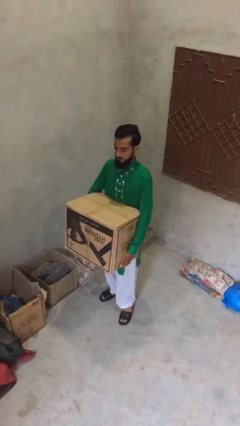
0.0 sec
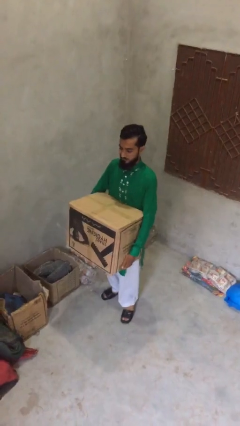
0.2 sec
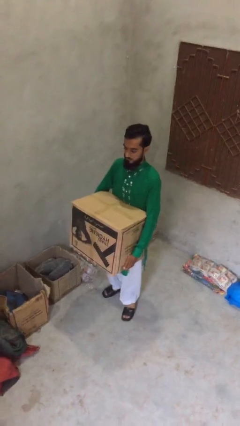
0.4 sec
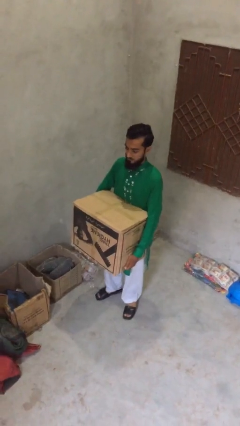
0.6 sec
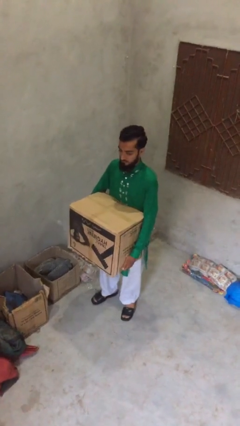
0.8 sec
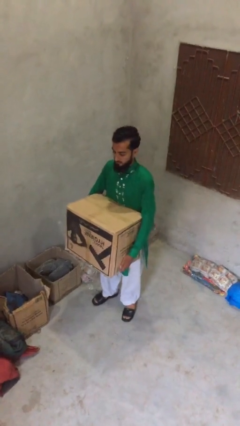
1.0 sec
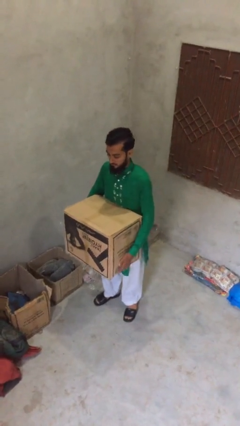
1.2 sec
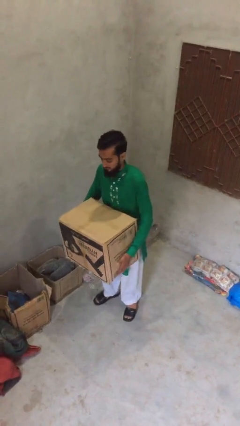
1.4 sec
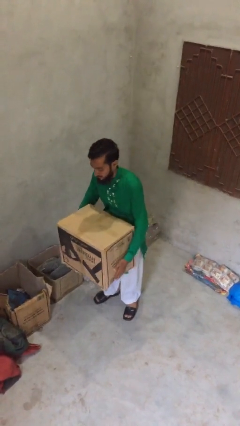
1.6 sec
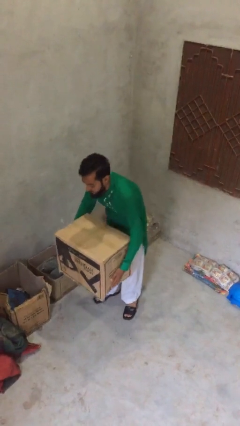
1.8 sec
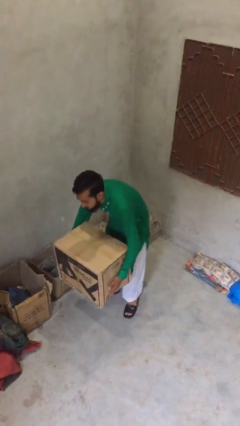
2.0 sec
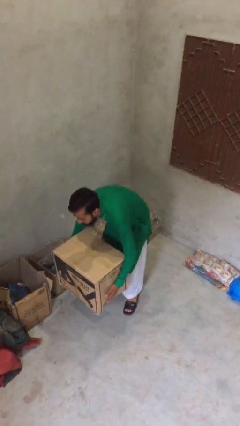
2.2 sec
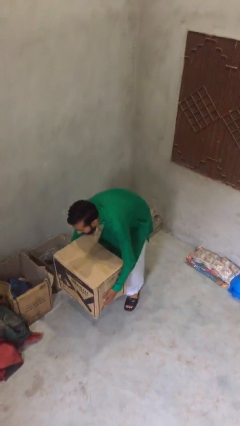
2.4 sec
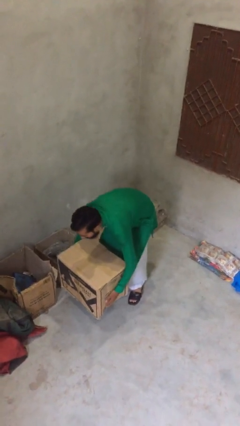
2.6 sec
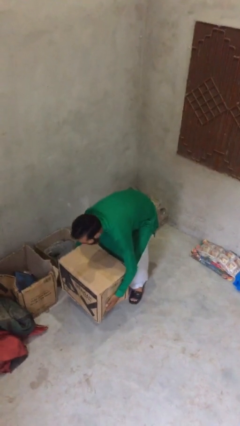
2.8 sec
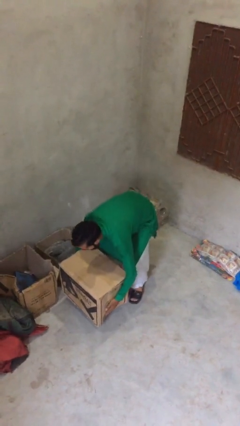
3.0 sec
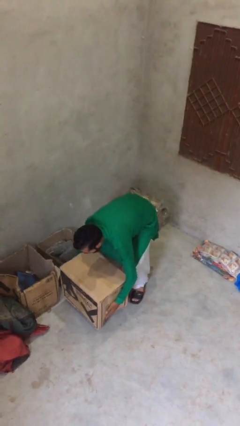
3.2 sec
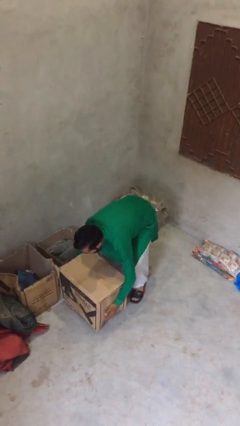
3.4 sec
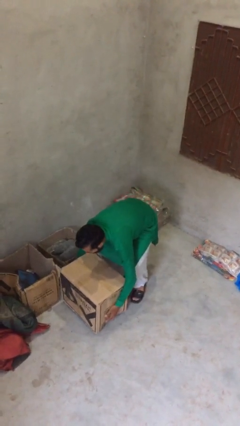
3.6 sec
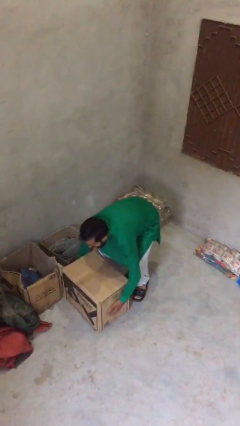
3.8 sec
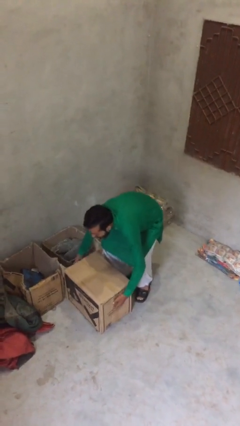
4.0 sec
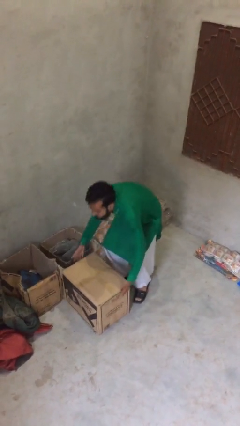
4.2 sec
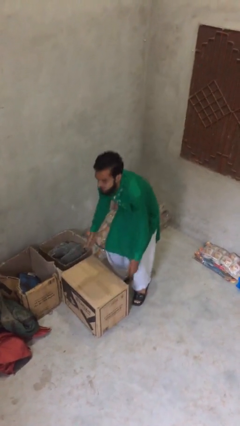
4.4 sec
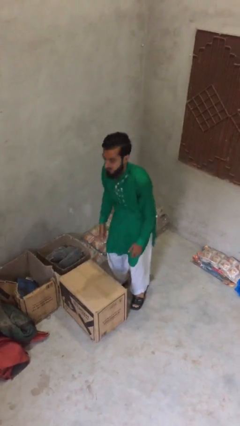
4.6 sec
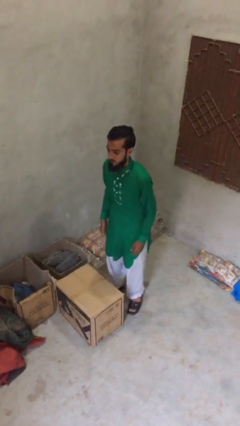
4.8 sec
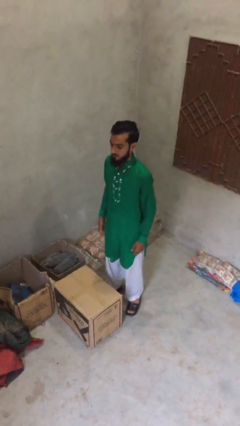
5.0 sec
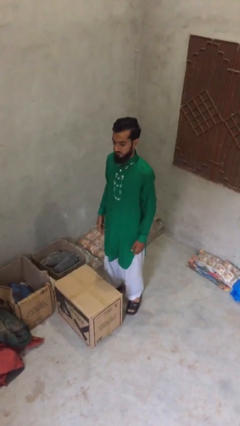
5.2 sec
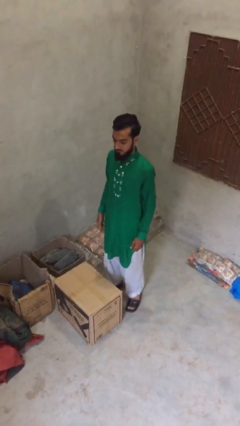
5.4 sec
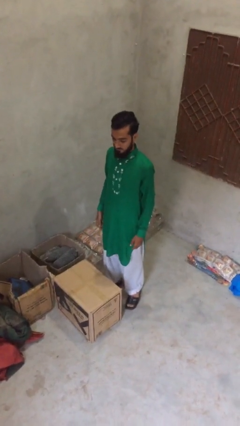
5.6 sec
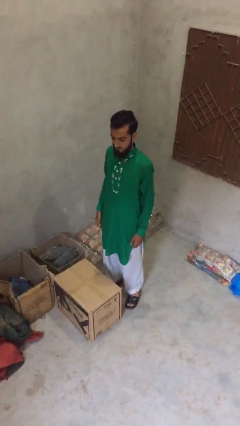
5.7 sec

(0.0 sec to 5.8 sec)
person puts down object on floor

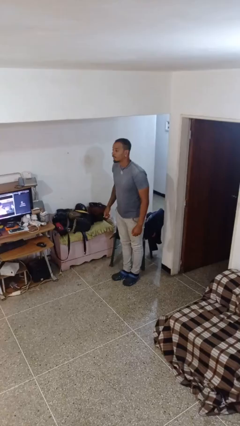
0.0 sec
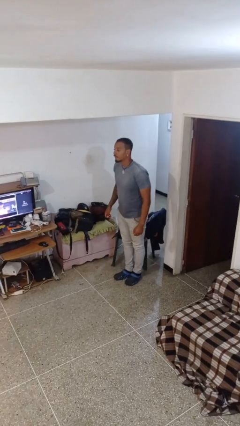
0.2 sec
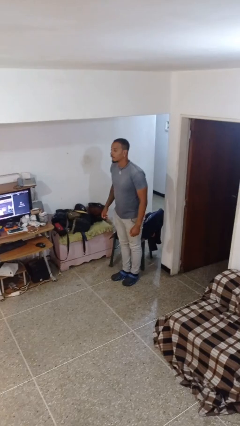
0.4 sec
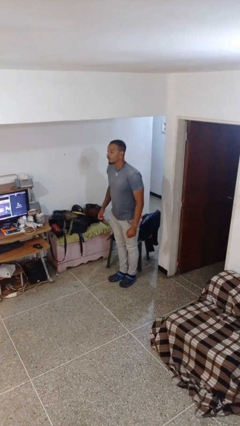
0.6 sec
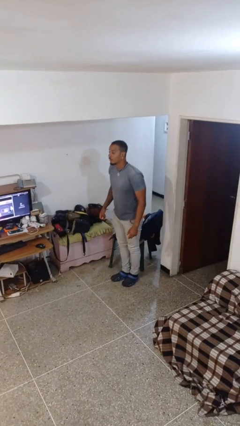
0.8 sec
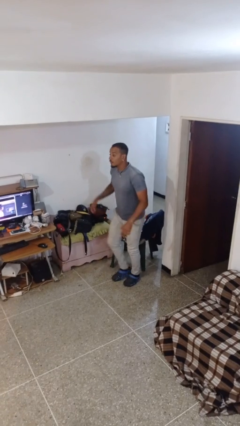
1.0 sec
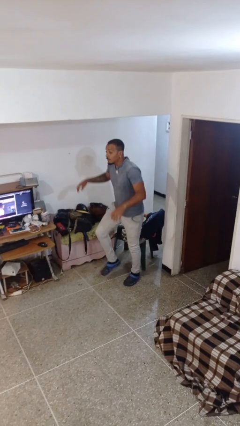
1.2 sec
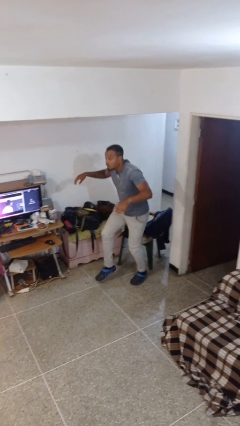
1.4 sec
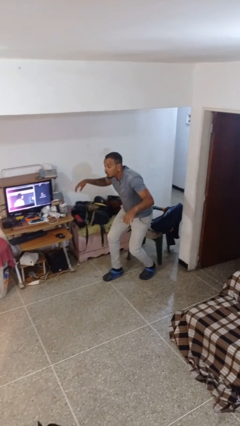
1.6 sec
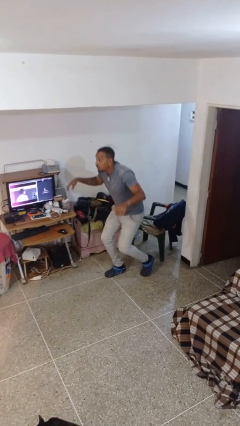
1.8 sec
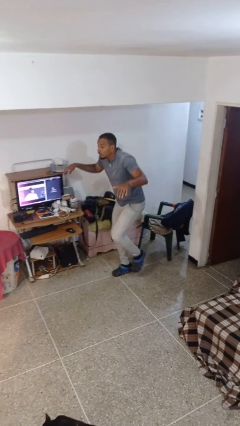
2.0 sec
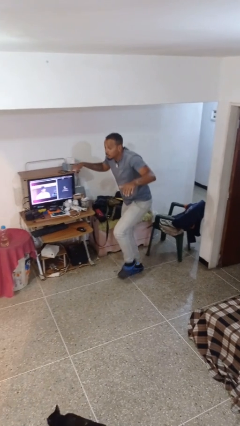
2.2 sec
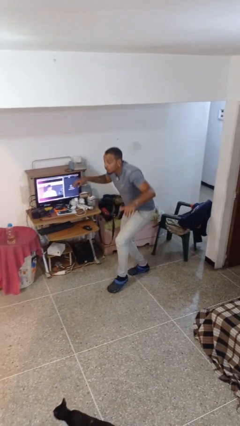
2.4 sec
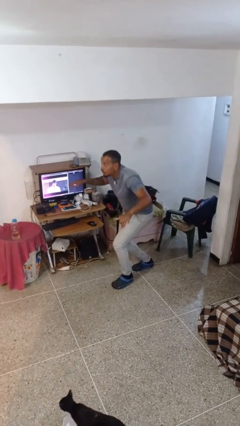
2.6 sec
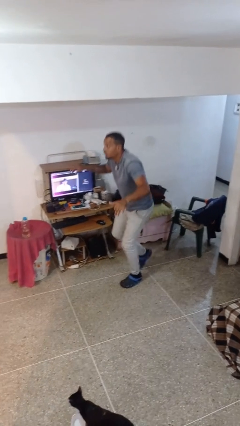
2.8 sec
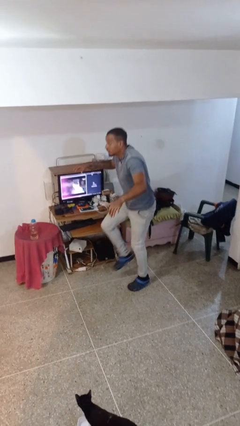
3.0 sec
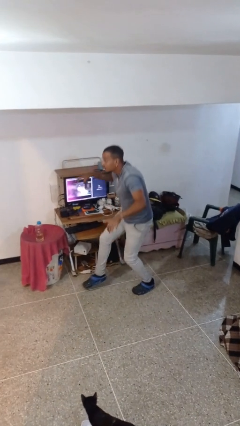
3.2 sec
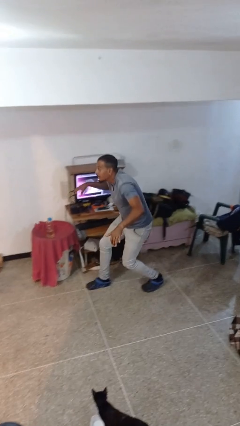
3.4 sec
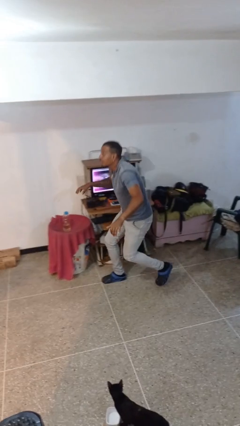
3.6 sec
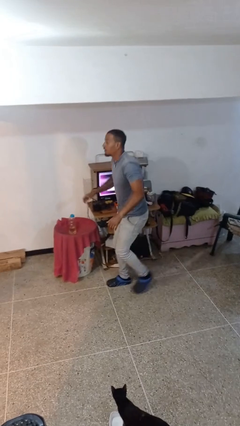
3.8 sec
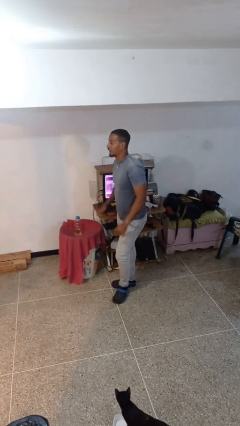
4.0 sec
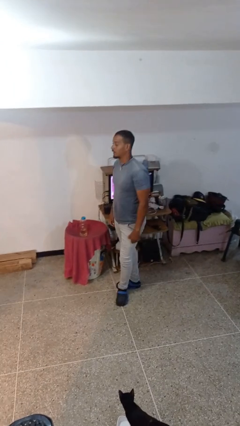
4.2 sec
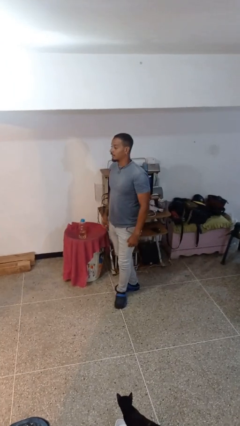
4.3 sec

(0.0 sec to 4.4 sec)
person walks tiptoe

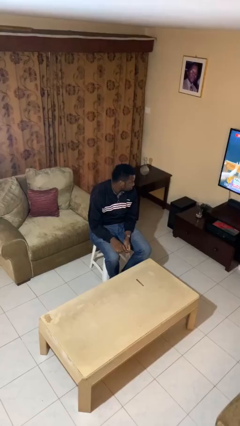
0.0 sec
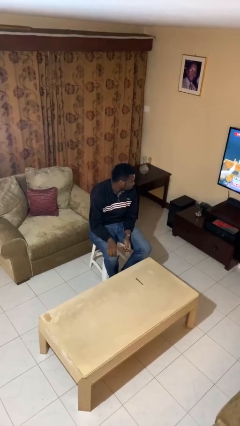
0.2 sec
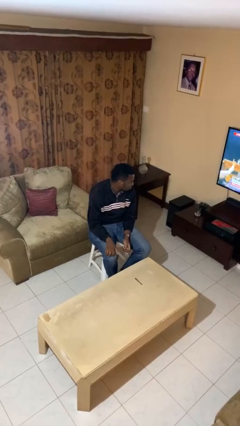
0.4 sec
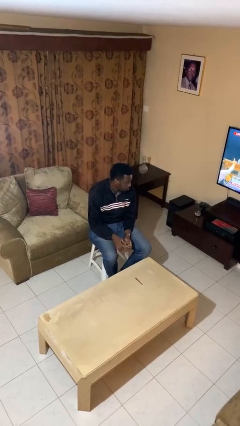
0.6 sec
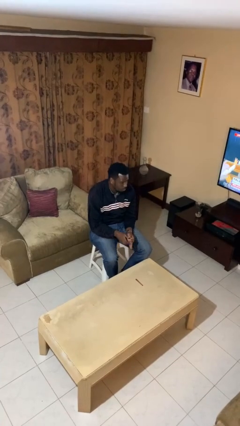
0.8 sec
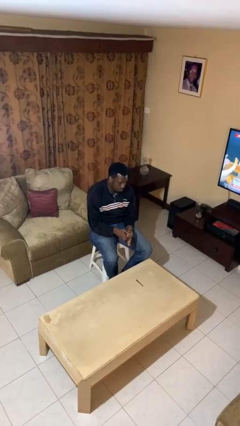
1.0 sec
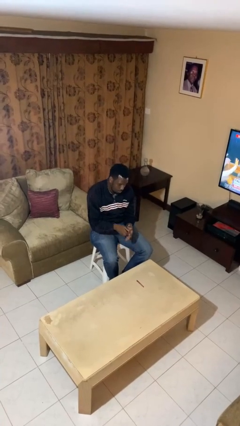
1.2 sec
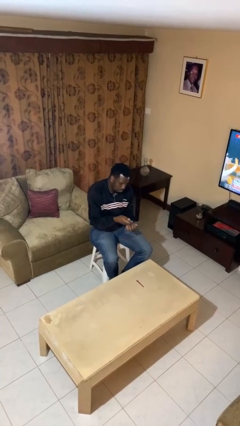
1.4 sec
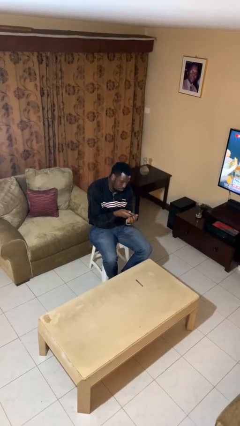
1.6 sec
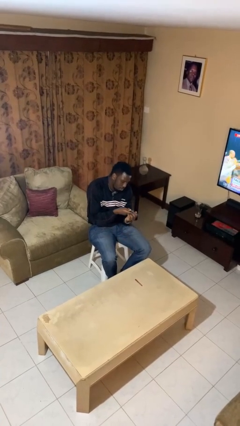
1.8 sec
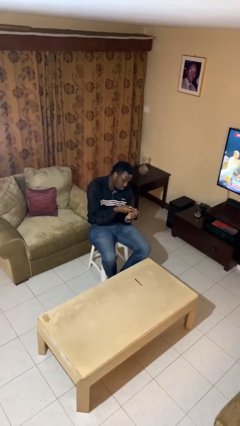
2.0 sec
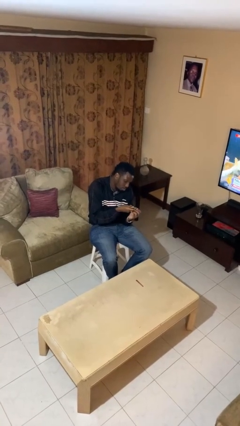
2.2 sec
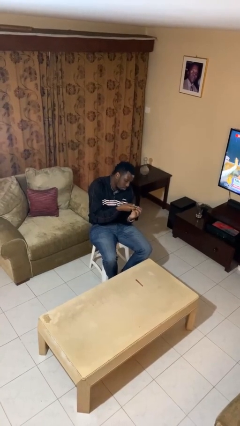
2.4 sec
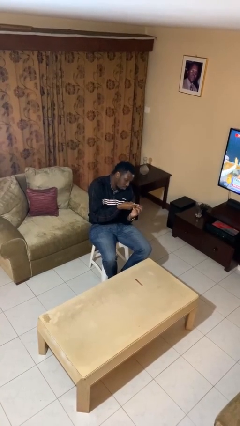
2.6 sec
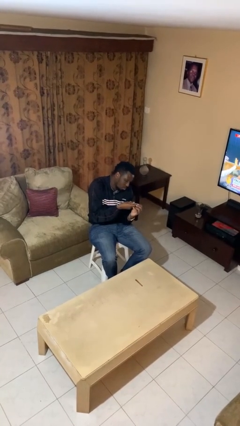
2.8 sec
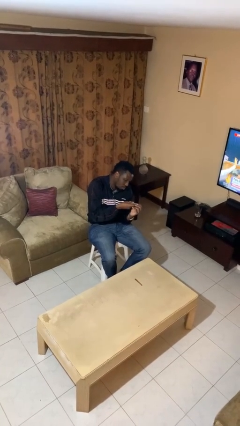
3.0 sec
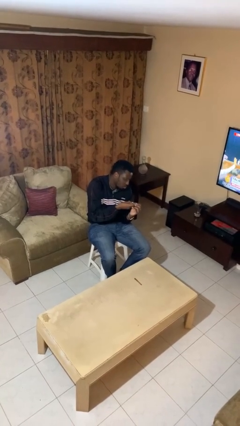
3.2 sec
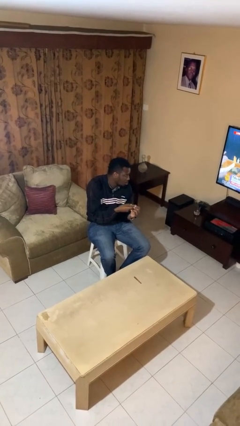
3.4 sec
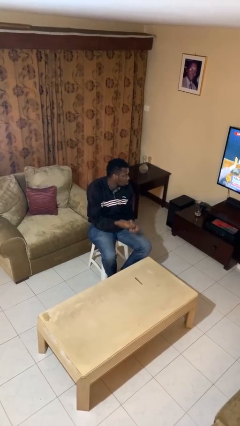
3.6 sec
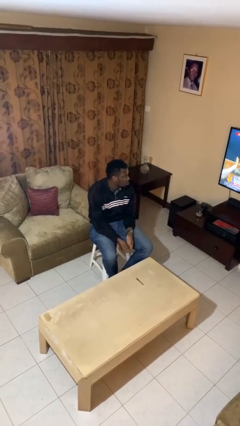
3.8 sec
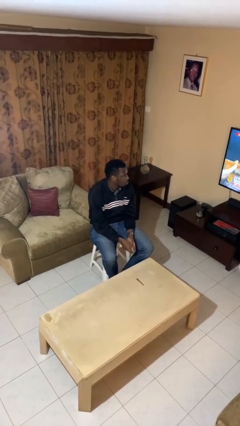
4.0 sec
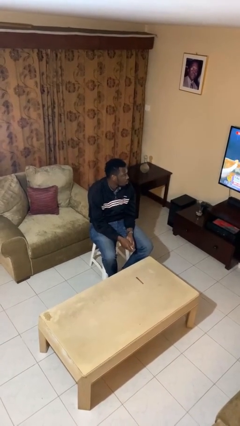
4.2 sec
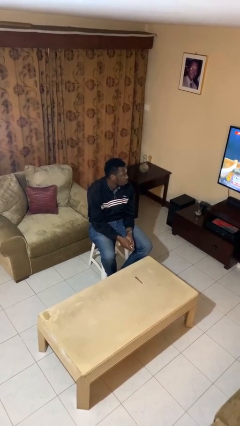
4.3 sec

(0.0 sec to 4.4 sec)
person clips fingernails

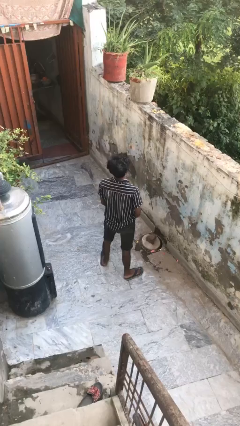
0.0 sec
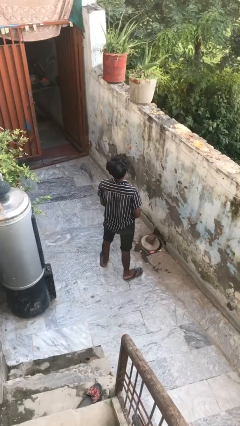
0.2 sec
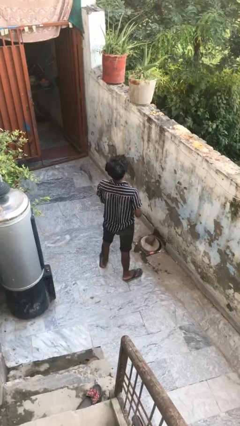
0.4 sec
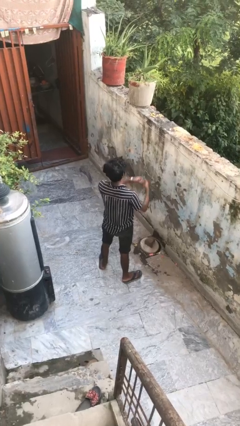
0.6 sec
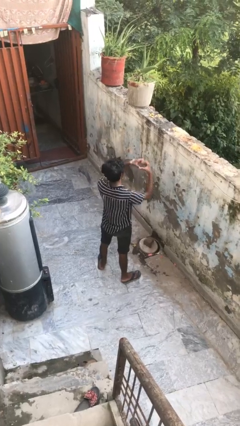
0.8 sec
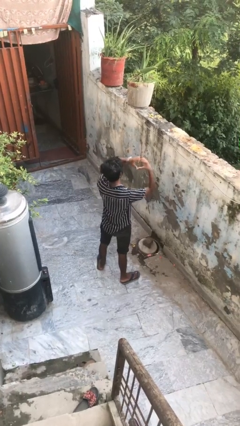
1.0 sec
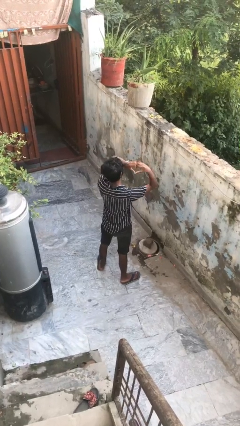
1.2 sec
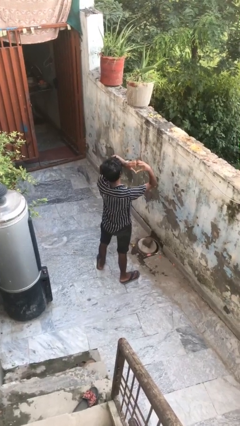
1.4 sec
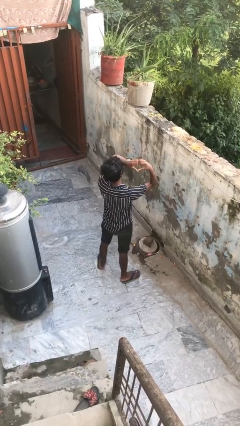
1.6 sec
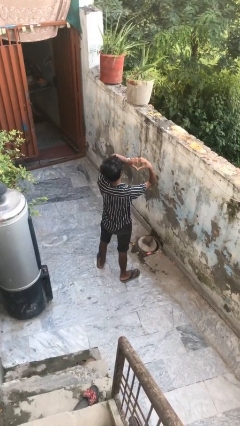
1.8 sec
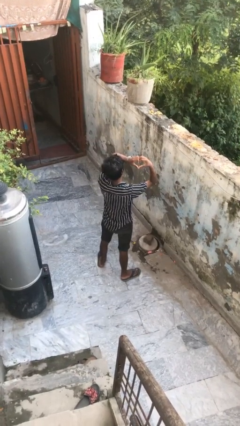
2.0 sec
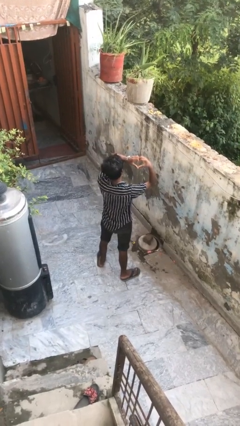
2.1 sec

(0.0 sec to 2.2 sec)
person gestures heart

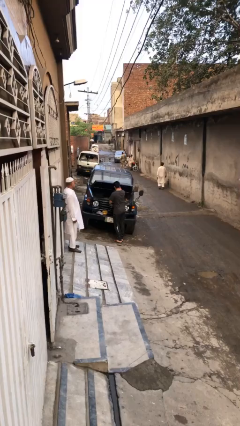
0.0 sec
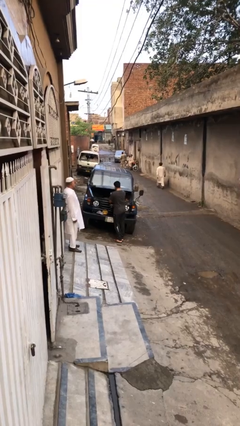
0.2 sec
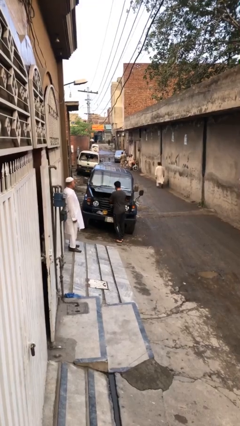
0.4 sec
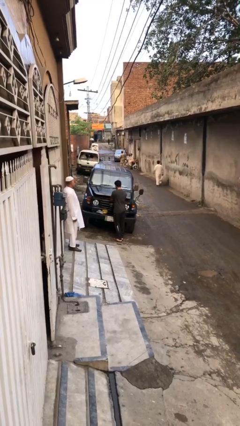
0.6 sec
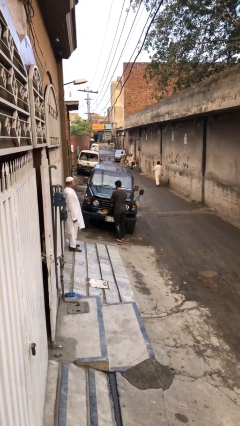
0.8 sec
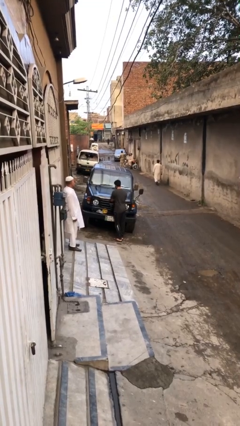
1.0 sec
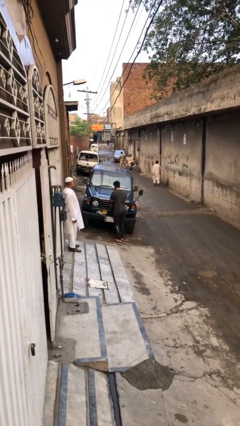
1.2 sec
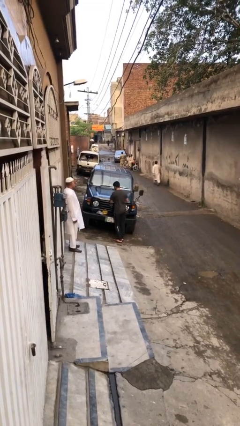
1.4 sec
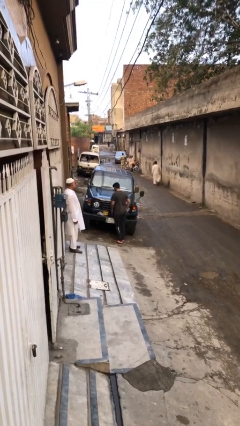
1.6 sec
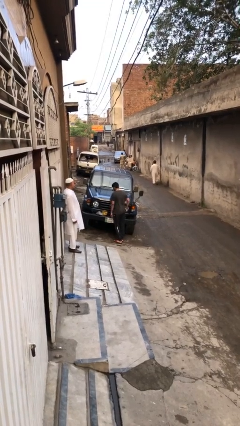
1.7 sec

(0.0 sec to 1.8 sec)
person closes car hood
